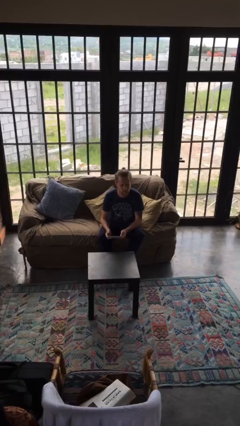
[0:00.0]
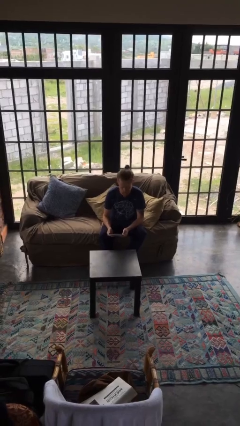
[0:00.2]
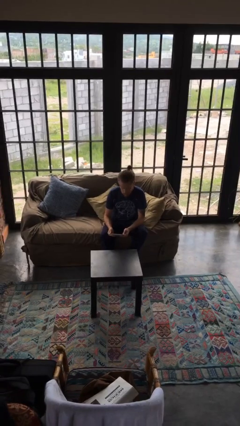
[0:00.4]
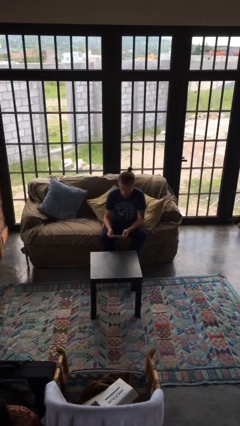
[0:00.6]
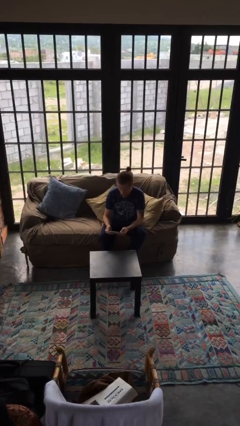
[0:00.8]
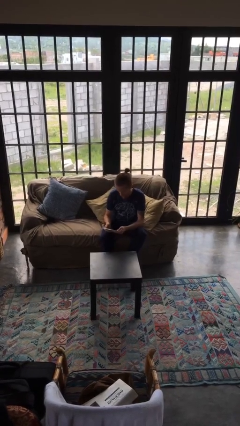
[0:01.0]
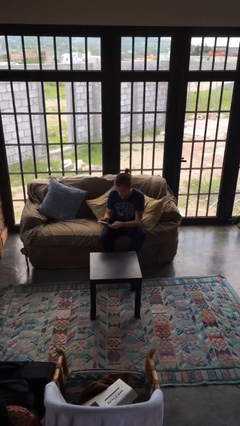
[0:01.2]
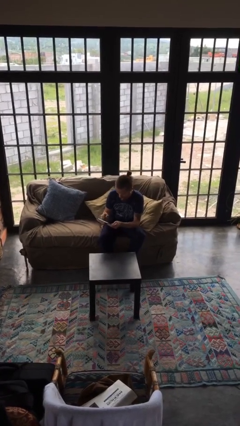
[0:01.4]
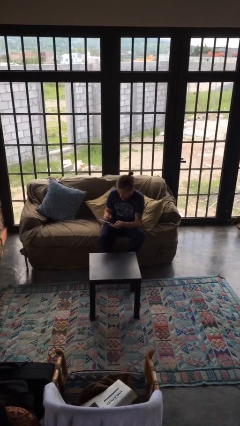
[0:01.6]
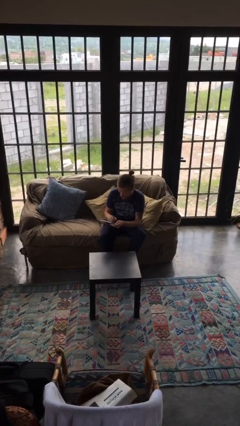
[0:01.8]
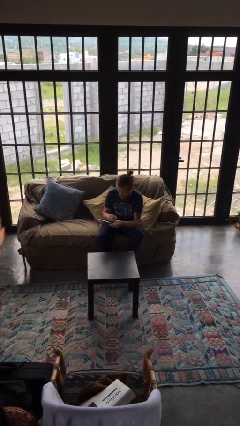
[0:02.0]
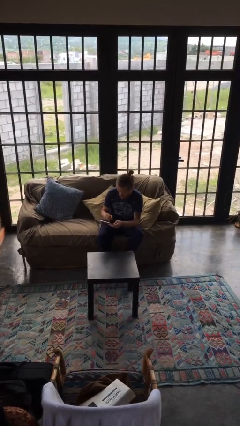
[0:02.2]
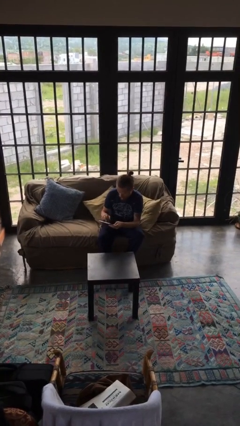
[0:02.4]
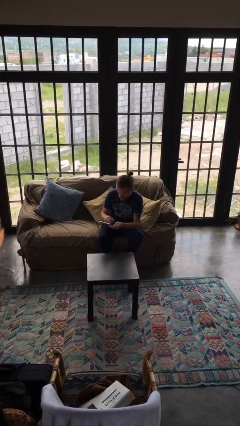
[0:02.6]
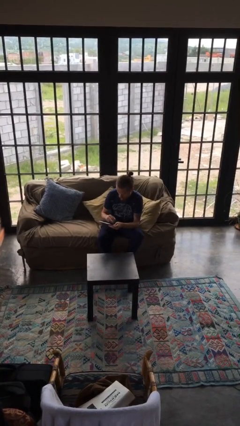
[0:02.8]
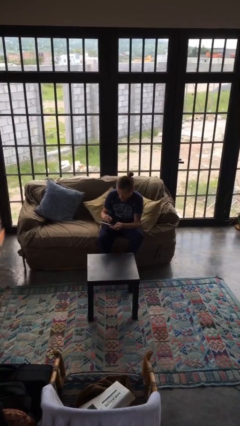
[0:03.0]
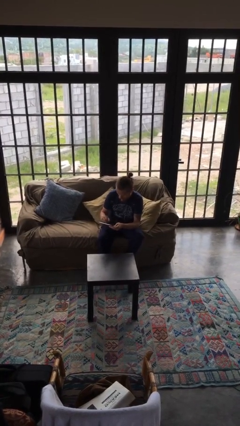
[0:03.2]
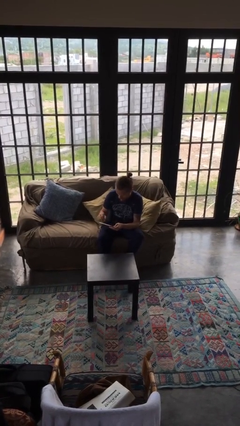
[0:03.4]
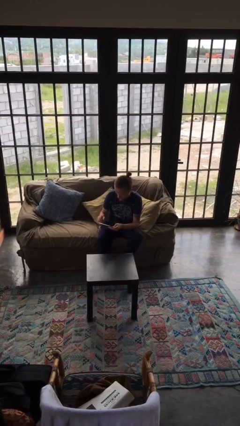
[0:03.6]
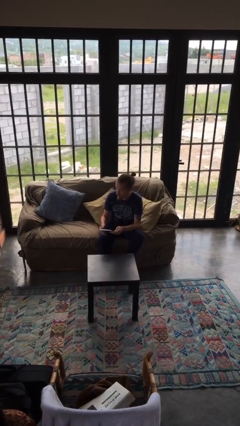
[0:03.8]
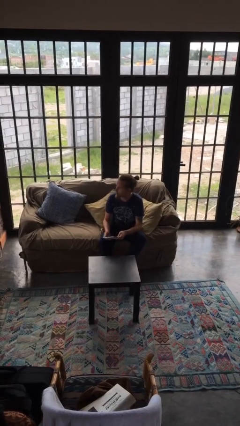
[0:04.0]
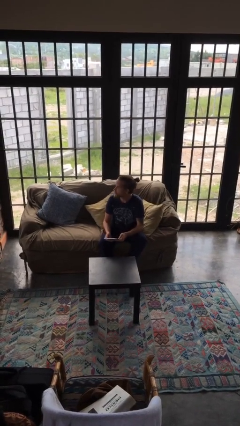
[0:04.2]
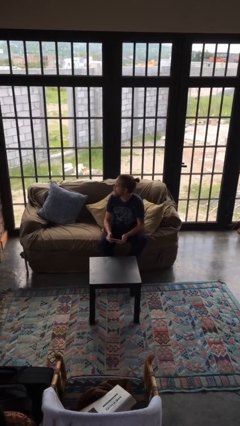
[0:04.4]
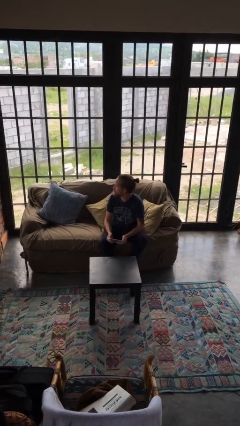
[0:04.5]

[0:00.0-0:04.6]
person interacts with tablet

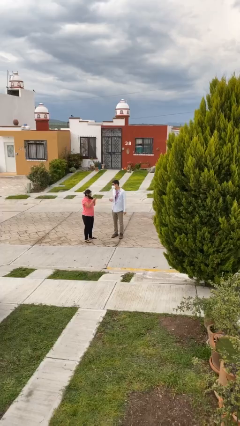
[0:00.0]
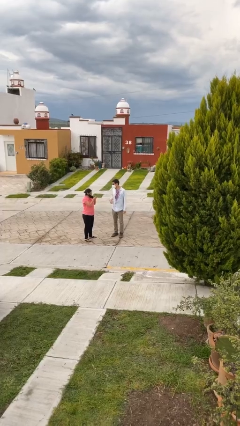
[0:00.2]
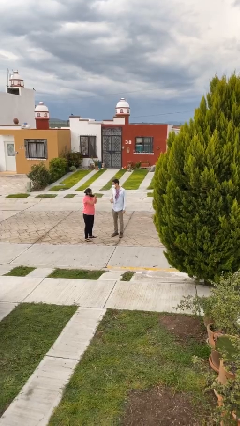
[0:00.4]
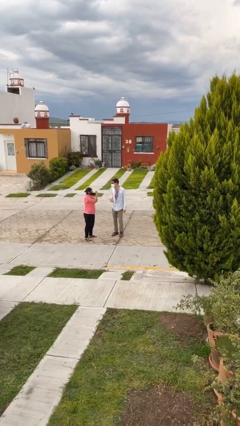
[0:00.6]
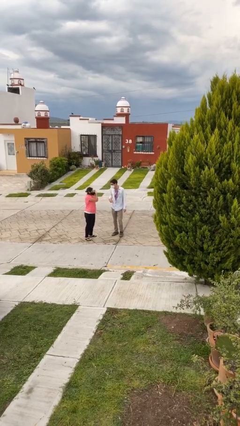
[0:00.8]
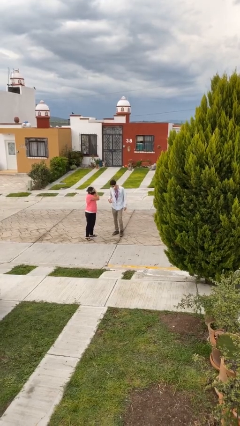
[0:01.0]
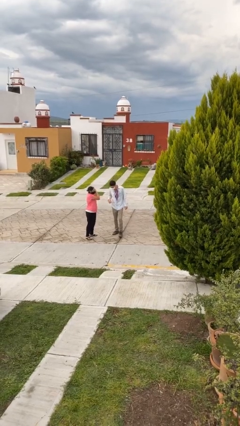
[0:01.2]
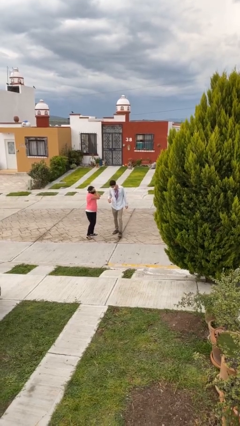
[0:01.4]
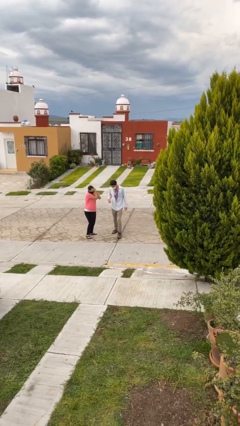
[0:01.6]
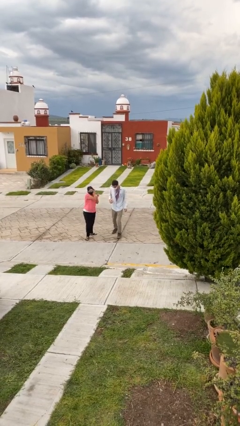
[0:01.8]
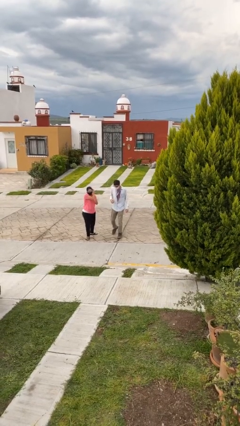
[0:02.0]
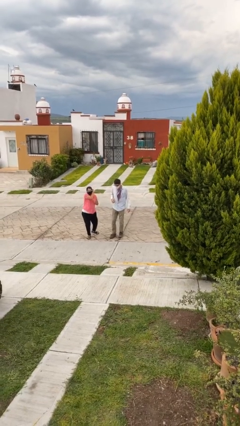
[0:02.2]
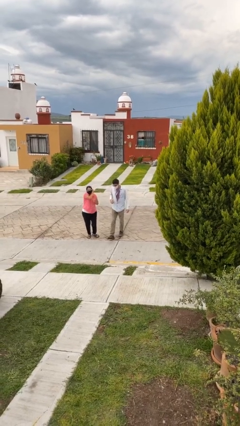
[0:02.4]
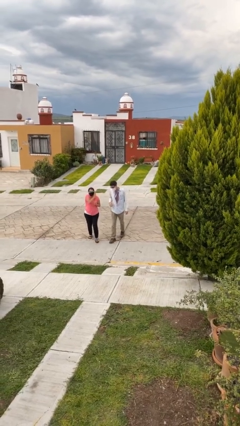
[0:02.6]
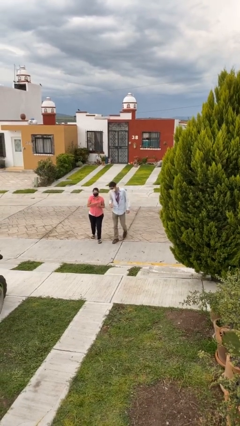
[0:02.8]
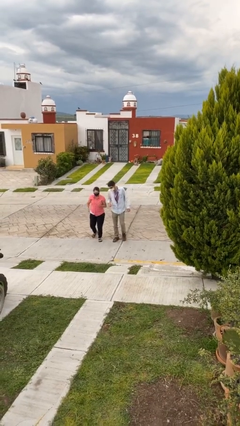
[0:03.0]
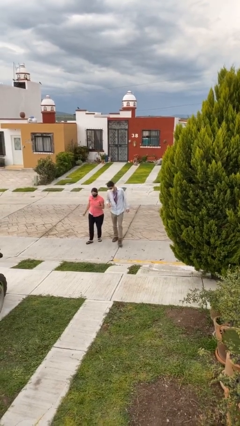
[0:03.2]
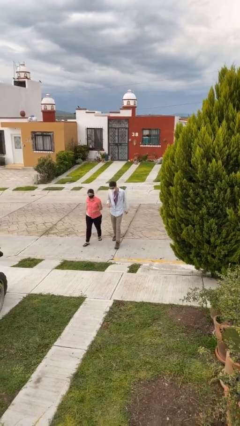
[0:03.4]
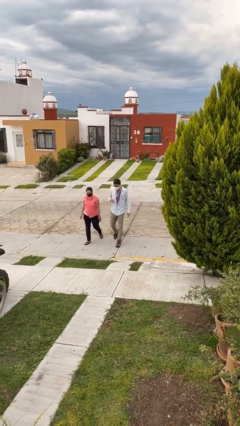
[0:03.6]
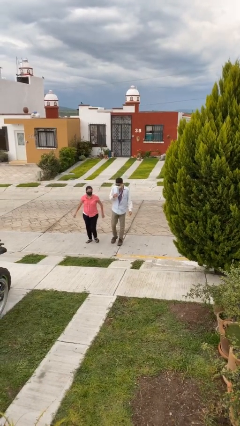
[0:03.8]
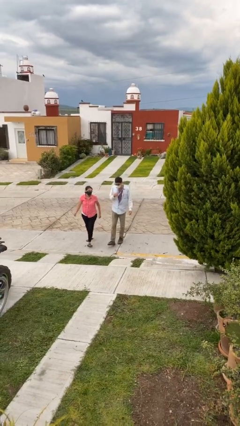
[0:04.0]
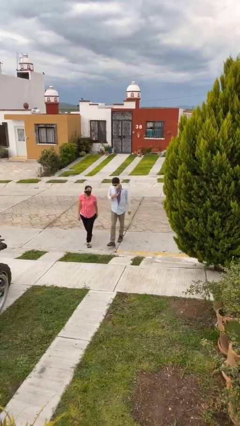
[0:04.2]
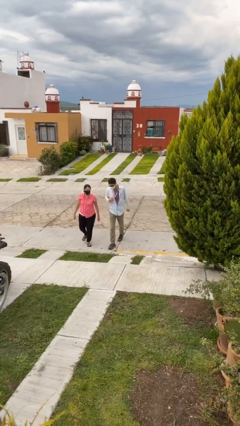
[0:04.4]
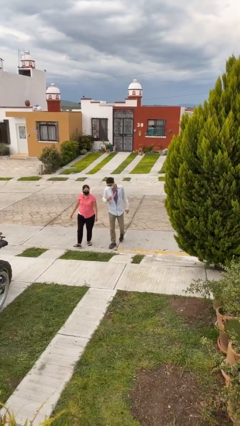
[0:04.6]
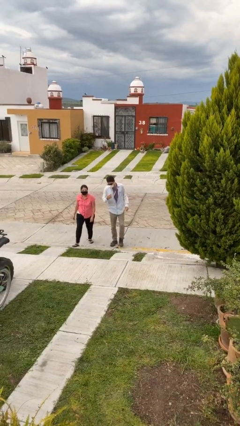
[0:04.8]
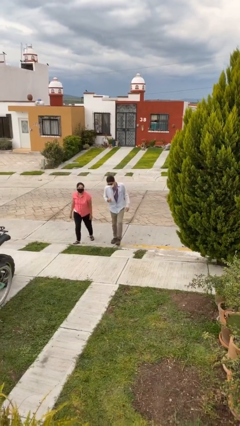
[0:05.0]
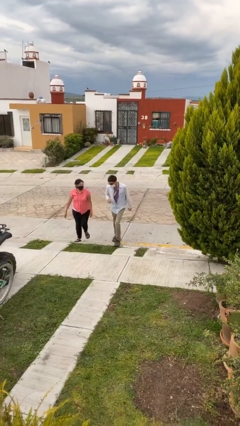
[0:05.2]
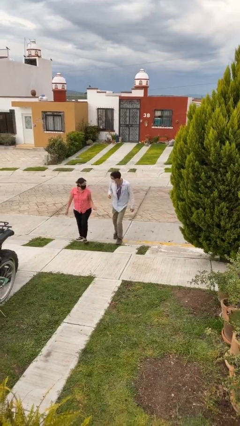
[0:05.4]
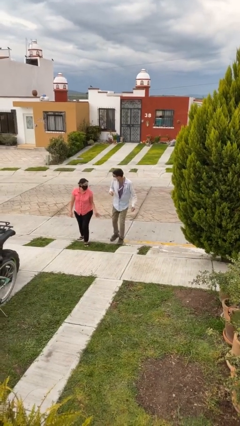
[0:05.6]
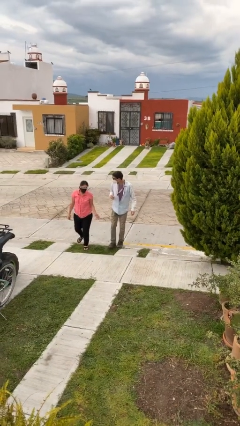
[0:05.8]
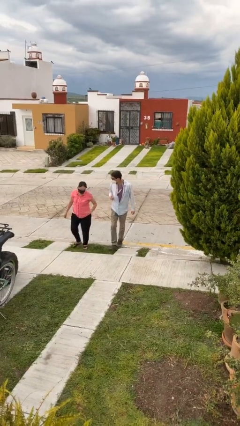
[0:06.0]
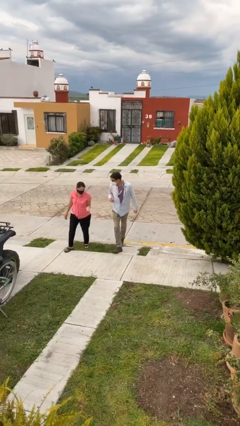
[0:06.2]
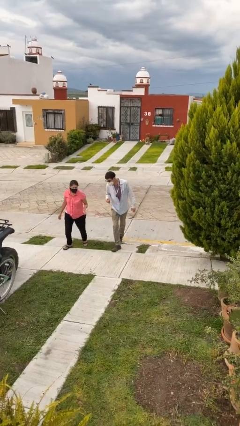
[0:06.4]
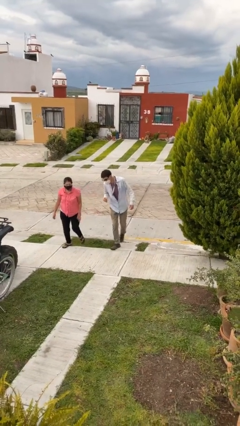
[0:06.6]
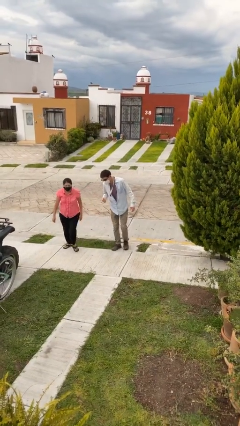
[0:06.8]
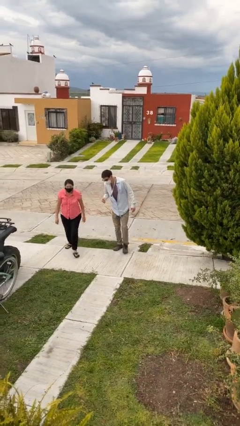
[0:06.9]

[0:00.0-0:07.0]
person talks to person

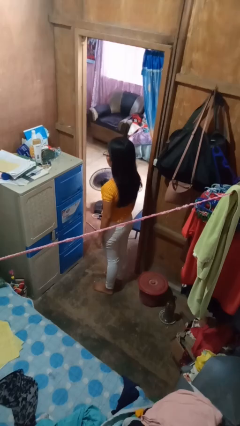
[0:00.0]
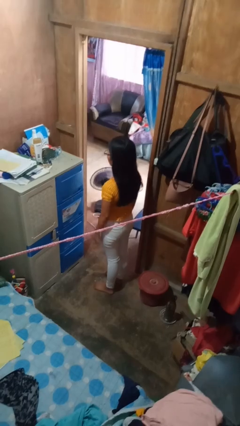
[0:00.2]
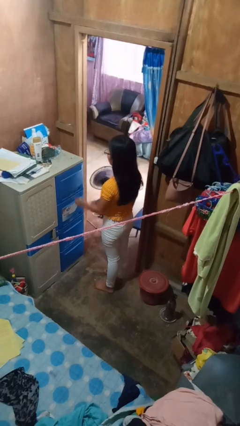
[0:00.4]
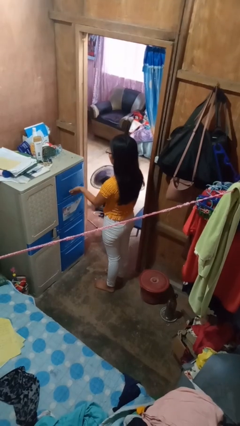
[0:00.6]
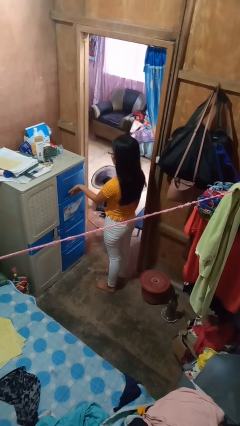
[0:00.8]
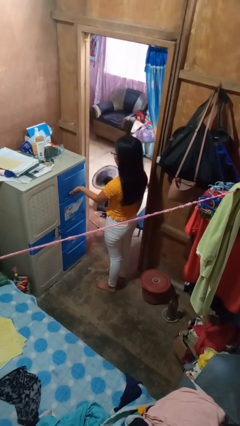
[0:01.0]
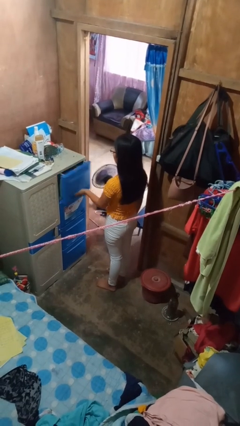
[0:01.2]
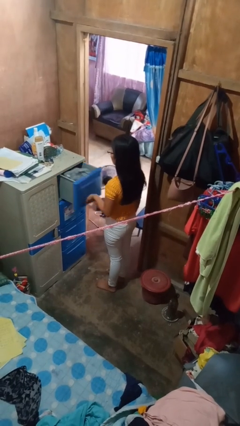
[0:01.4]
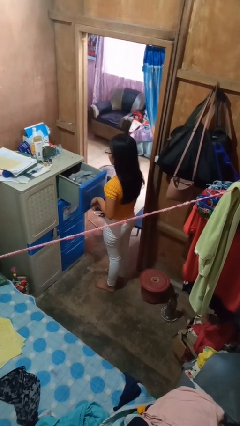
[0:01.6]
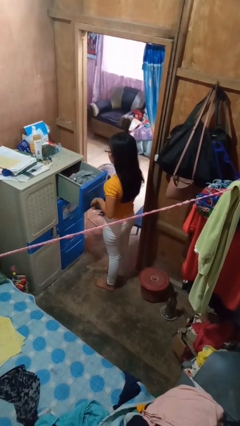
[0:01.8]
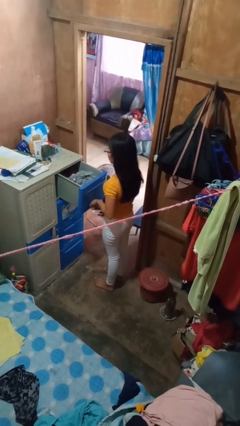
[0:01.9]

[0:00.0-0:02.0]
person opens dresser drawer

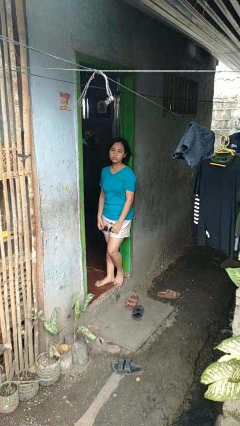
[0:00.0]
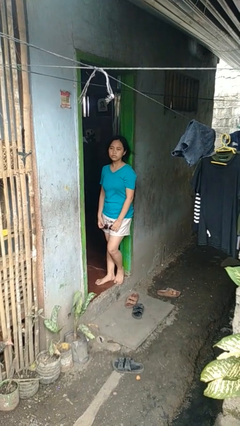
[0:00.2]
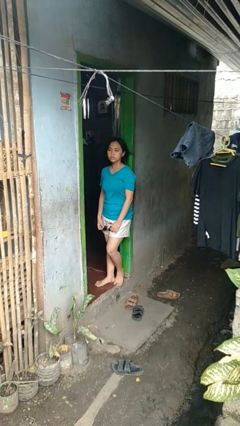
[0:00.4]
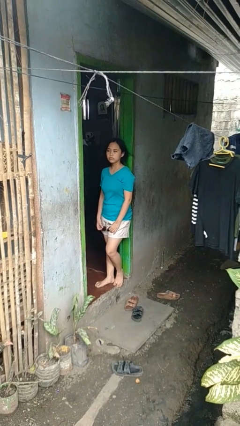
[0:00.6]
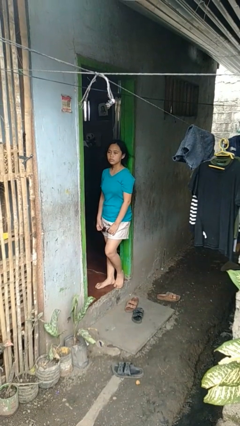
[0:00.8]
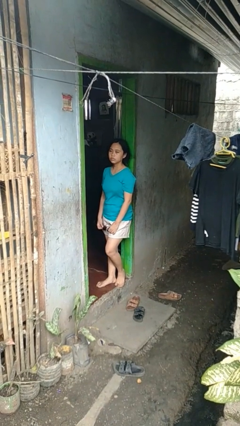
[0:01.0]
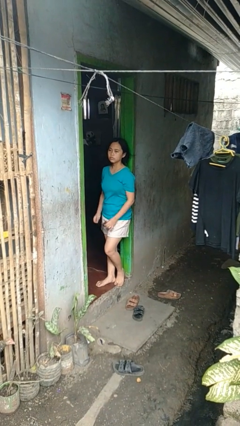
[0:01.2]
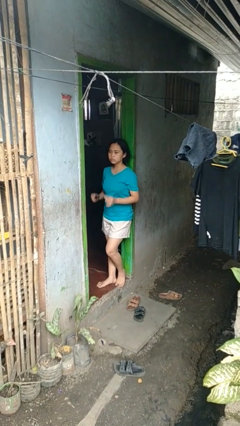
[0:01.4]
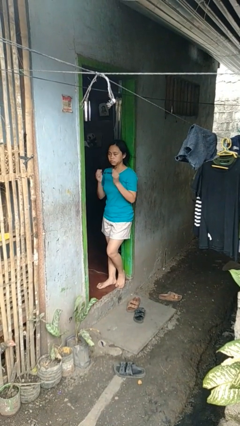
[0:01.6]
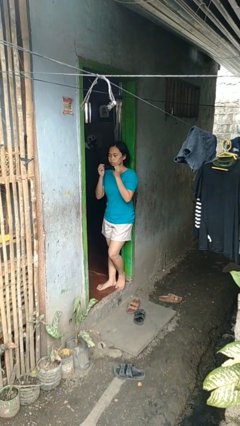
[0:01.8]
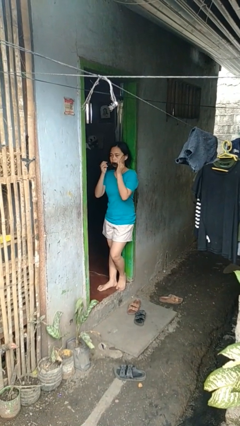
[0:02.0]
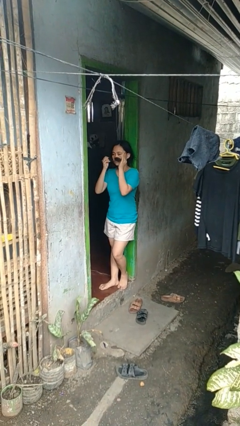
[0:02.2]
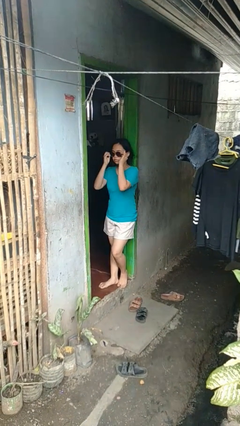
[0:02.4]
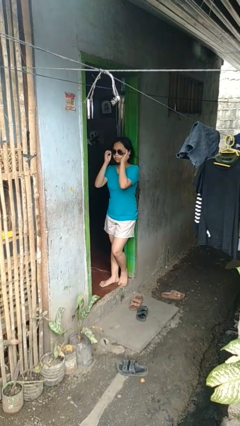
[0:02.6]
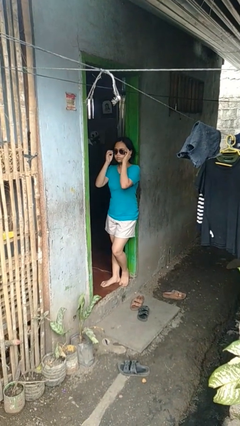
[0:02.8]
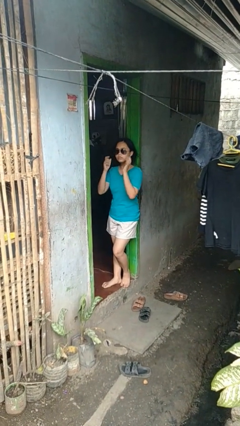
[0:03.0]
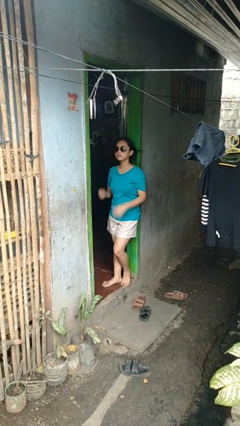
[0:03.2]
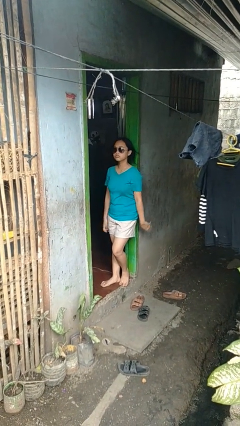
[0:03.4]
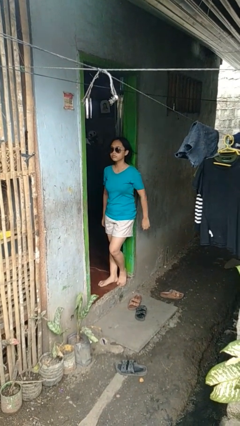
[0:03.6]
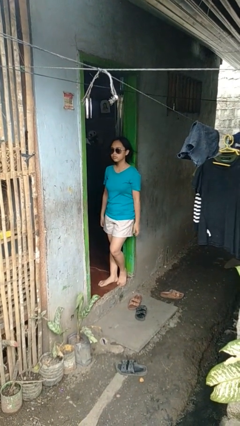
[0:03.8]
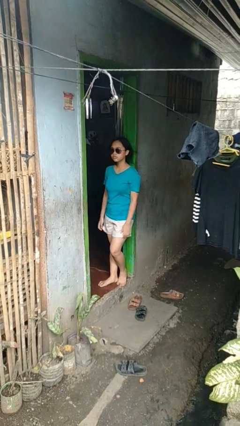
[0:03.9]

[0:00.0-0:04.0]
person puts on sunglasses
